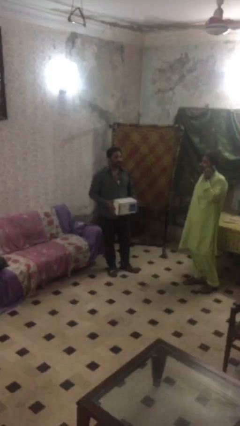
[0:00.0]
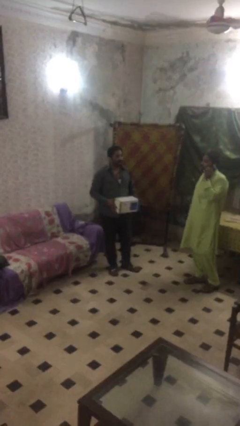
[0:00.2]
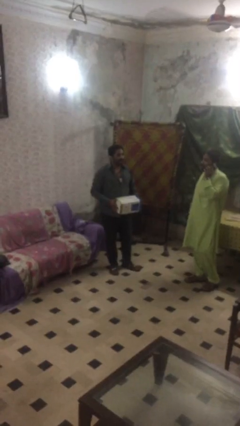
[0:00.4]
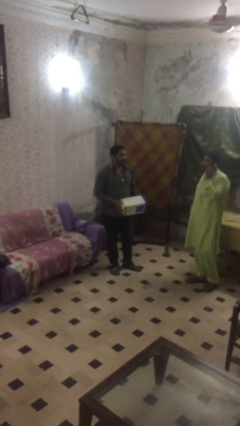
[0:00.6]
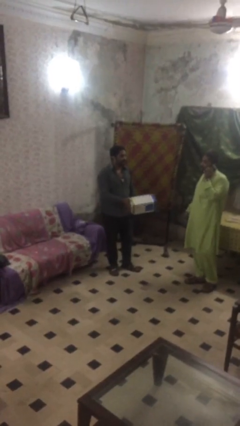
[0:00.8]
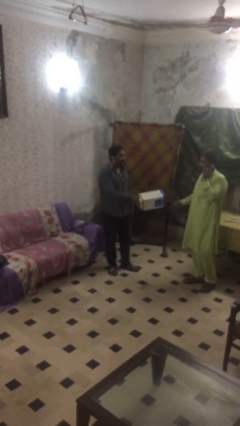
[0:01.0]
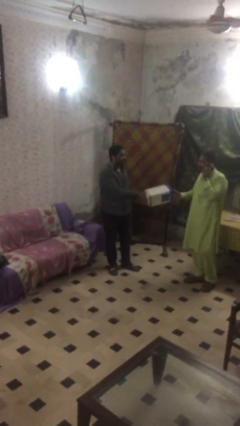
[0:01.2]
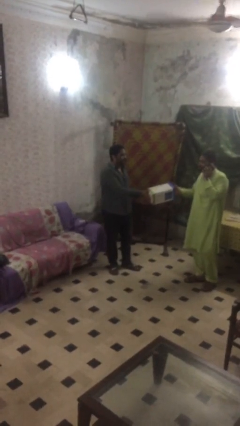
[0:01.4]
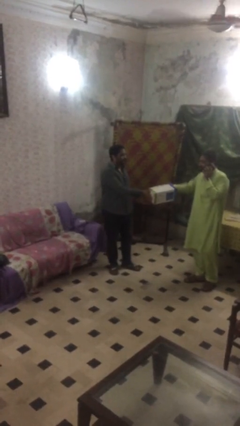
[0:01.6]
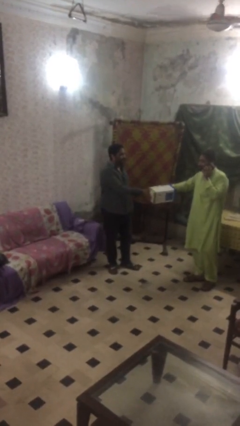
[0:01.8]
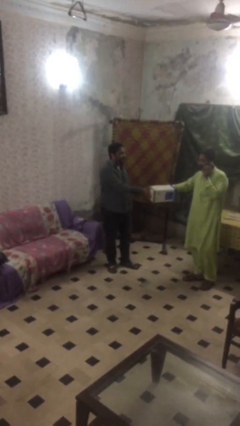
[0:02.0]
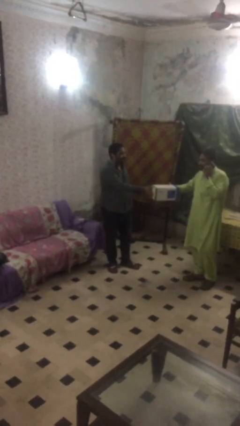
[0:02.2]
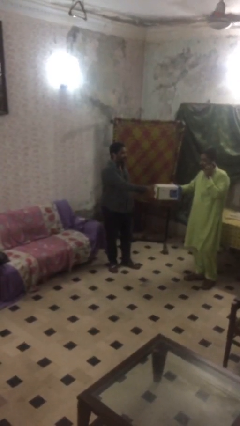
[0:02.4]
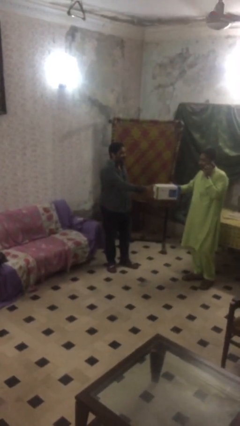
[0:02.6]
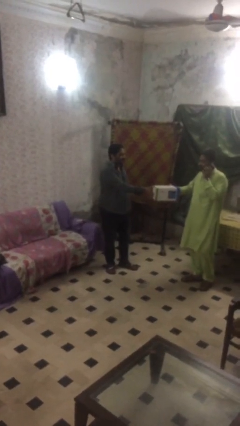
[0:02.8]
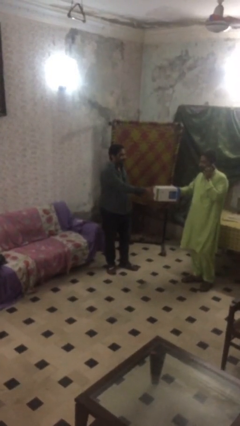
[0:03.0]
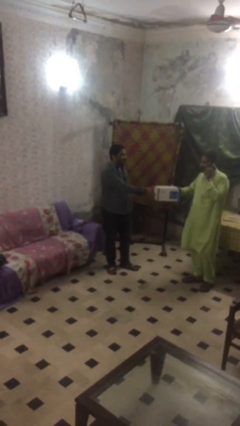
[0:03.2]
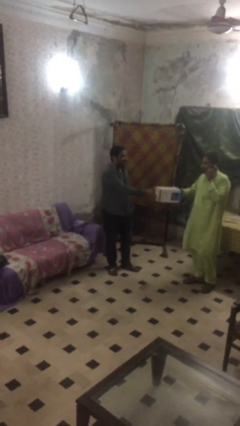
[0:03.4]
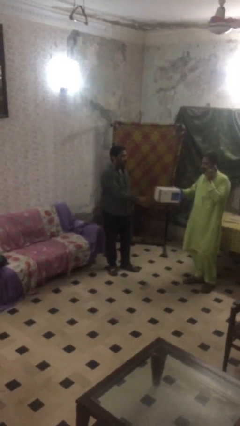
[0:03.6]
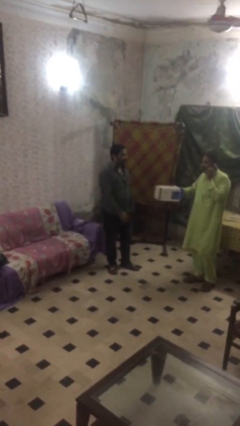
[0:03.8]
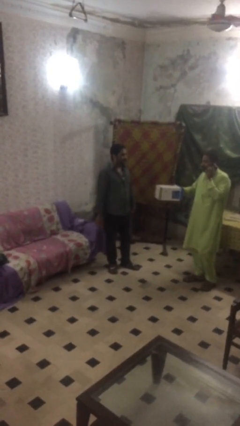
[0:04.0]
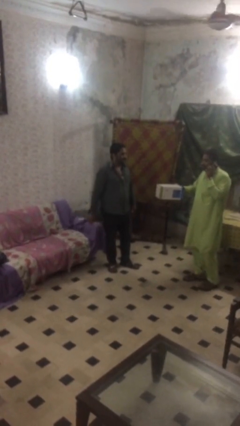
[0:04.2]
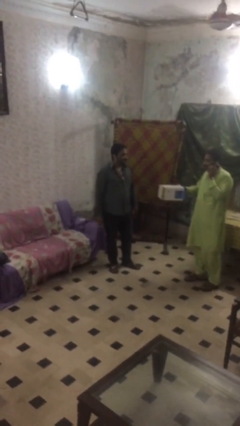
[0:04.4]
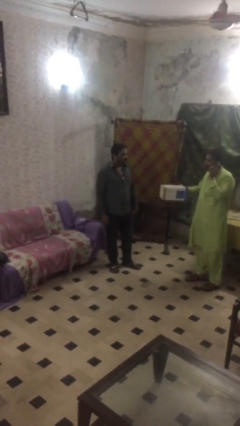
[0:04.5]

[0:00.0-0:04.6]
person transfers object to person

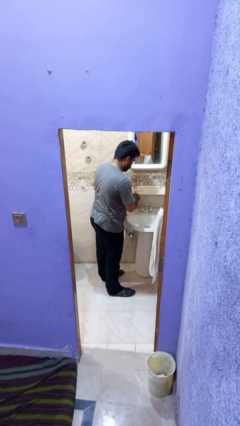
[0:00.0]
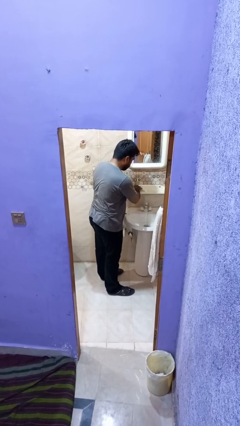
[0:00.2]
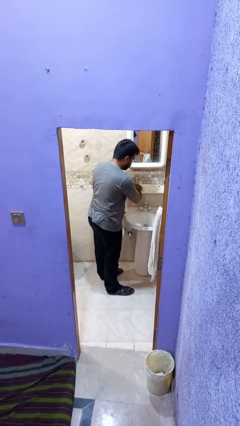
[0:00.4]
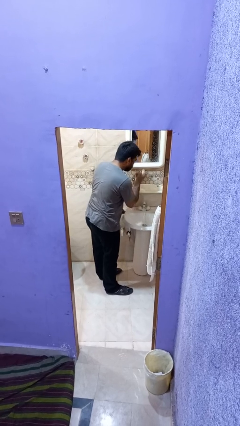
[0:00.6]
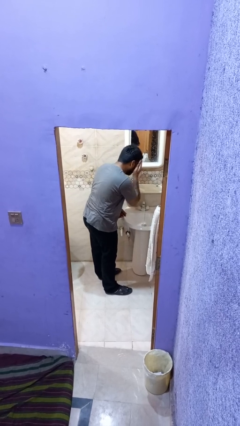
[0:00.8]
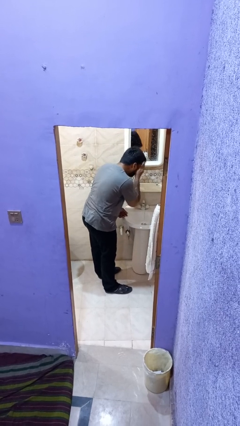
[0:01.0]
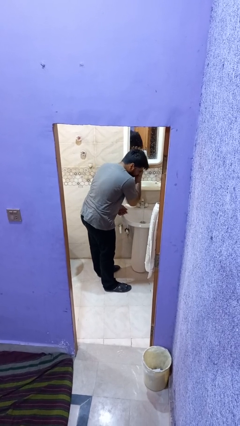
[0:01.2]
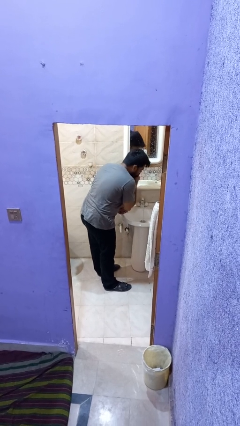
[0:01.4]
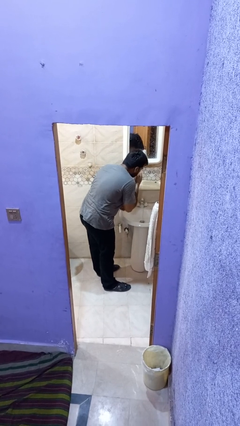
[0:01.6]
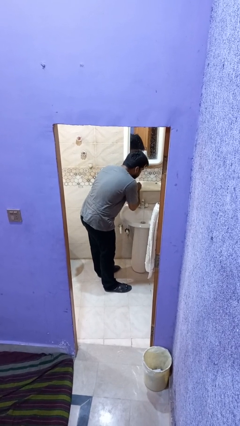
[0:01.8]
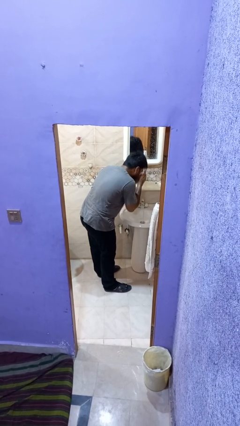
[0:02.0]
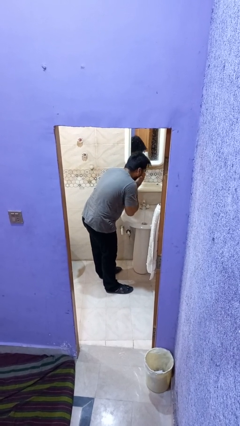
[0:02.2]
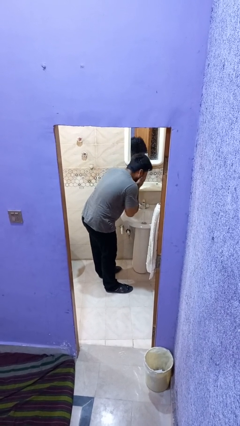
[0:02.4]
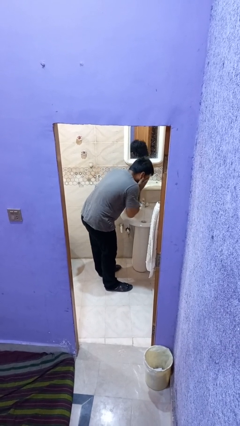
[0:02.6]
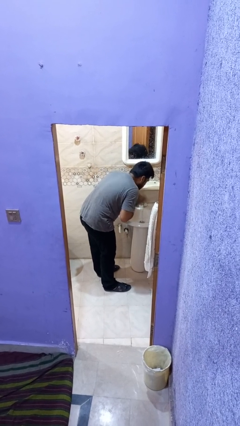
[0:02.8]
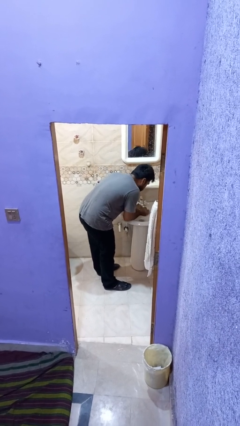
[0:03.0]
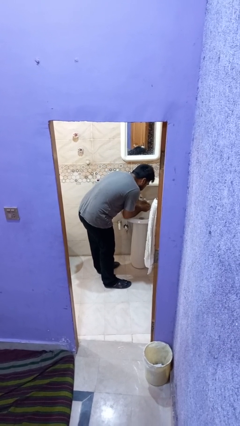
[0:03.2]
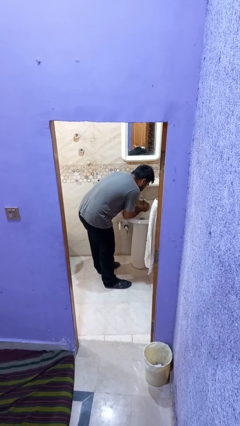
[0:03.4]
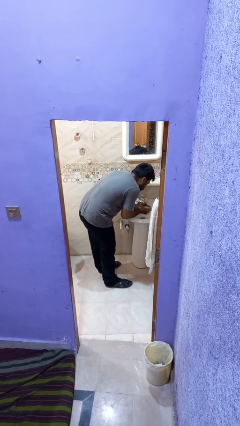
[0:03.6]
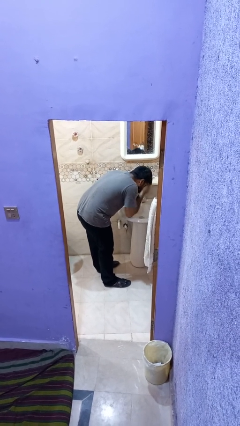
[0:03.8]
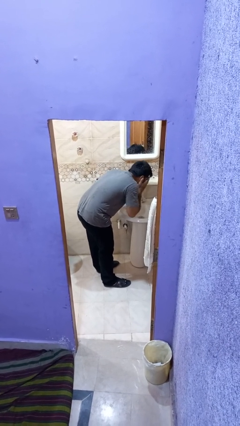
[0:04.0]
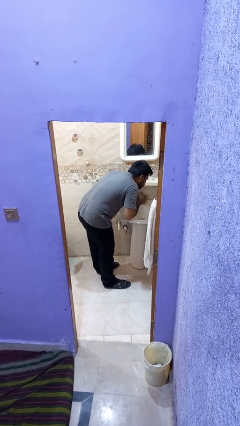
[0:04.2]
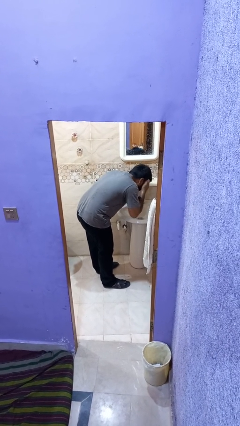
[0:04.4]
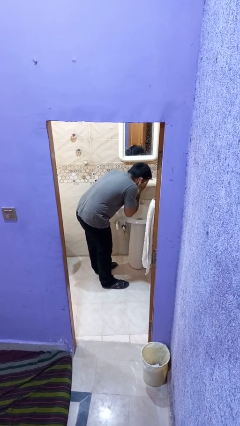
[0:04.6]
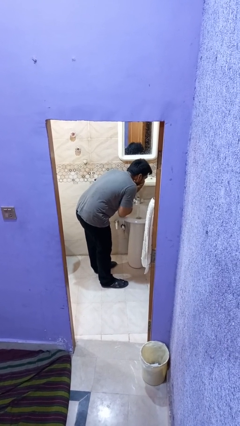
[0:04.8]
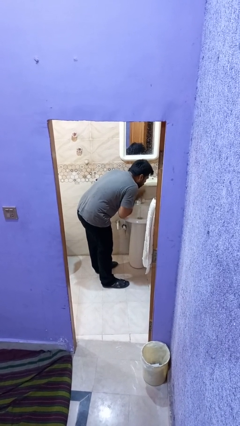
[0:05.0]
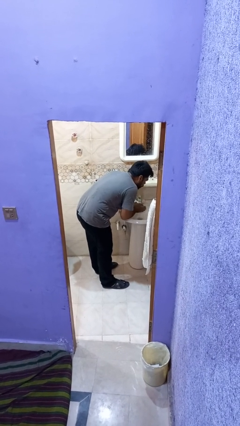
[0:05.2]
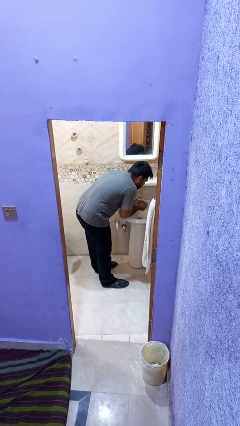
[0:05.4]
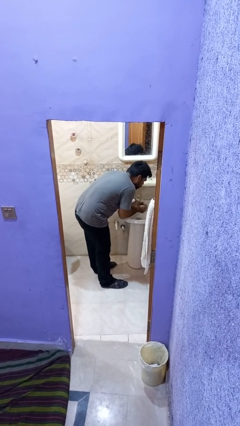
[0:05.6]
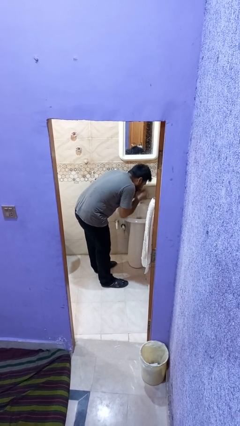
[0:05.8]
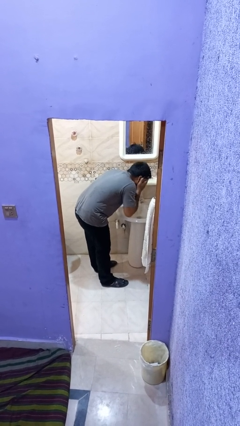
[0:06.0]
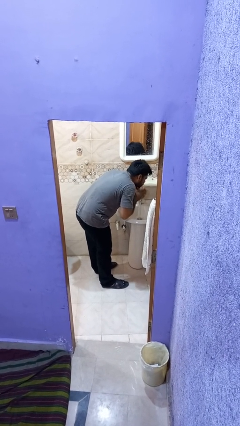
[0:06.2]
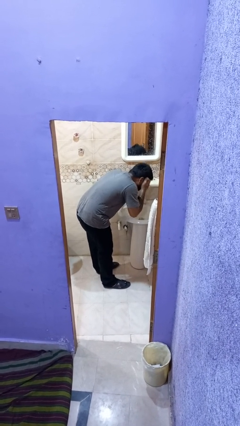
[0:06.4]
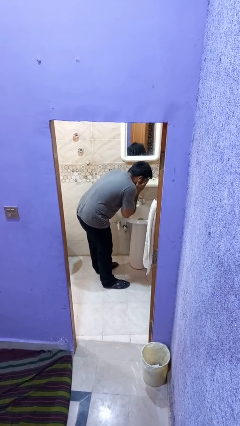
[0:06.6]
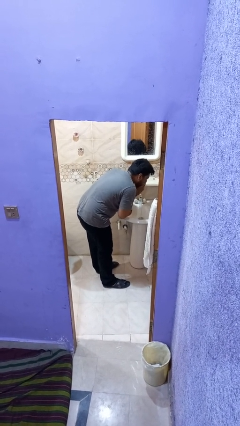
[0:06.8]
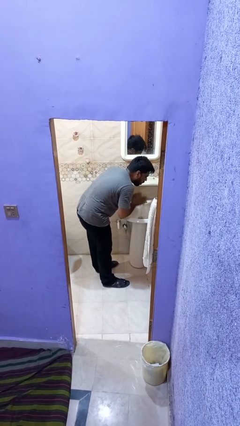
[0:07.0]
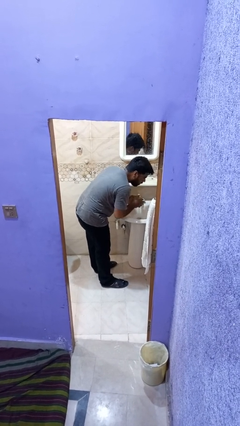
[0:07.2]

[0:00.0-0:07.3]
person washes face

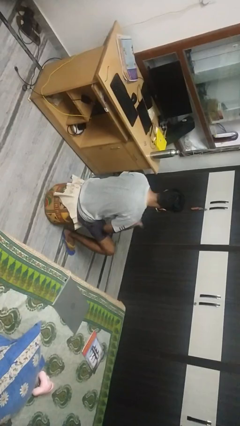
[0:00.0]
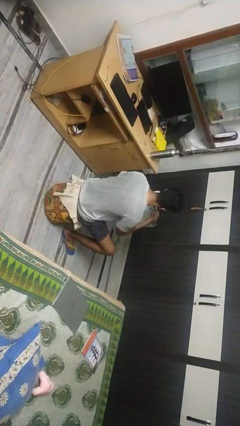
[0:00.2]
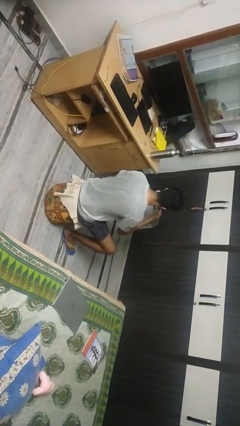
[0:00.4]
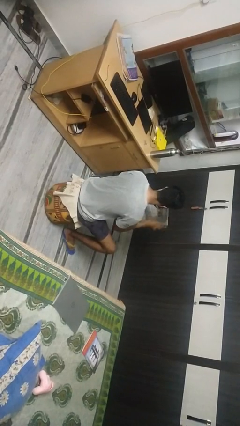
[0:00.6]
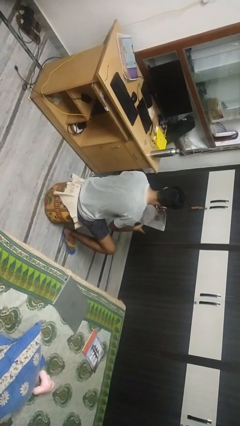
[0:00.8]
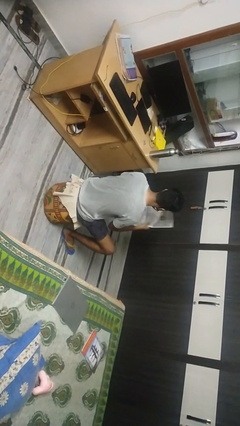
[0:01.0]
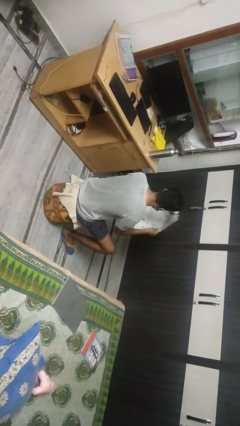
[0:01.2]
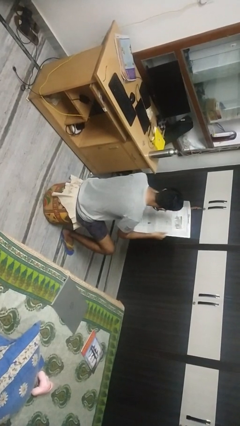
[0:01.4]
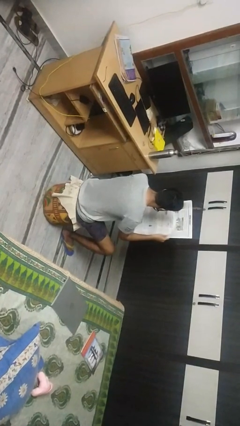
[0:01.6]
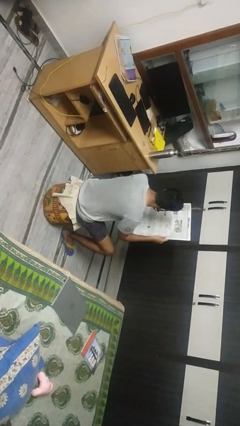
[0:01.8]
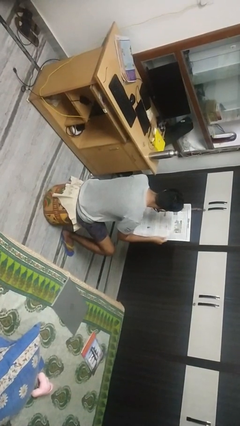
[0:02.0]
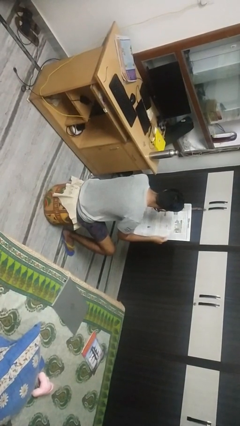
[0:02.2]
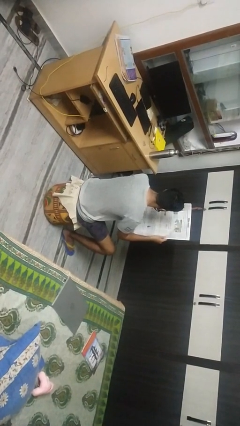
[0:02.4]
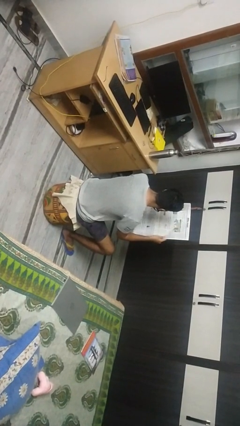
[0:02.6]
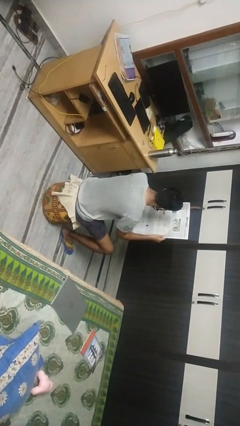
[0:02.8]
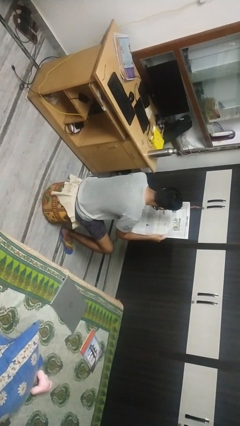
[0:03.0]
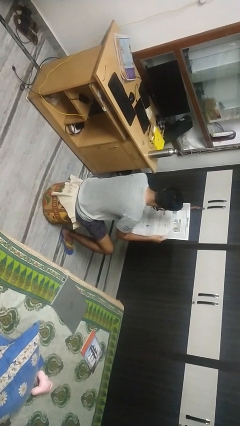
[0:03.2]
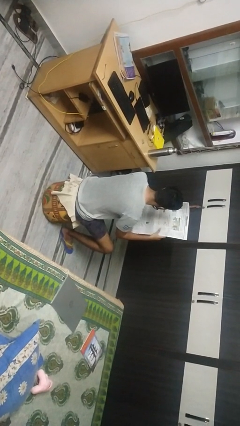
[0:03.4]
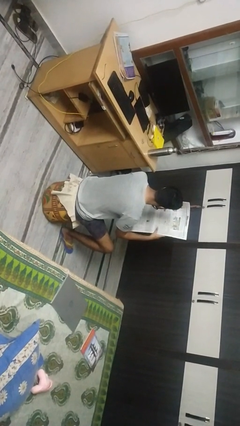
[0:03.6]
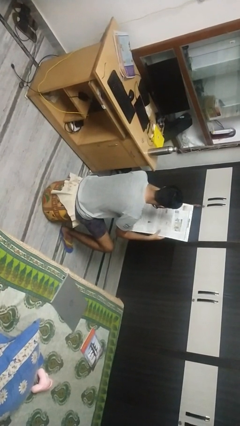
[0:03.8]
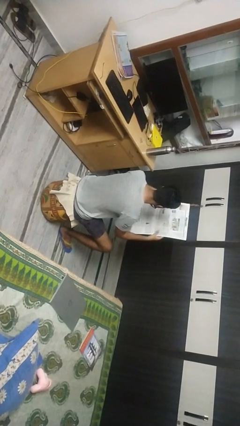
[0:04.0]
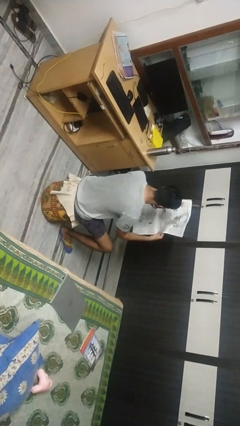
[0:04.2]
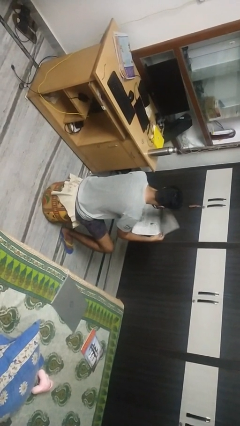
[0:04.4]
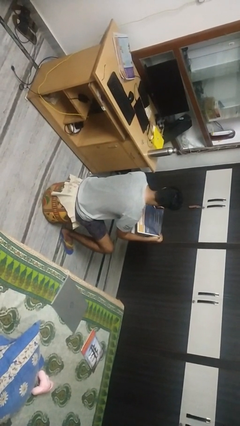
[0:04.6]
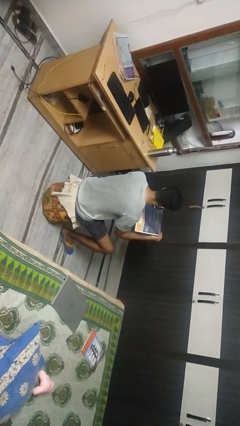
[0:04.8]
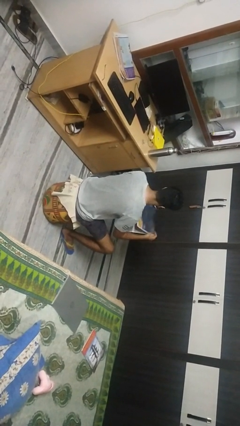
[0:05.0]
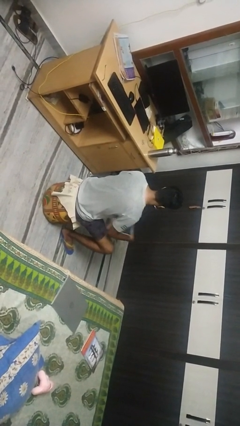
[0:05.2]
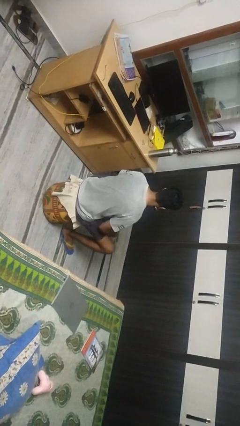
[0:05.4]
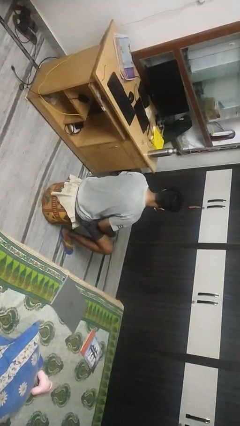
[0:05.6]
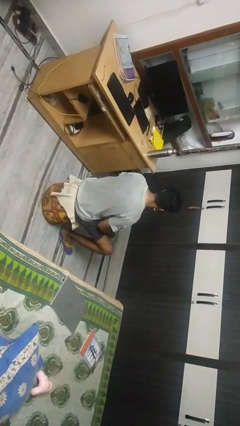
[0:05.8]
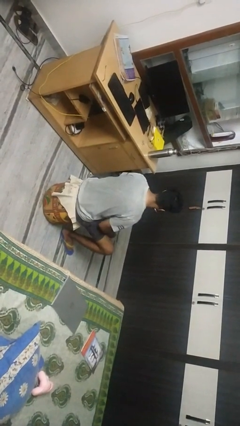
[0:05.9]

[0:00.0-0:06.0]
person reads newspaper

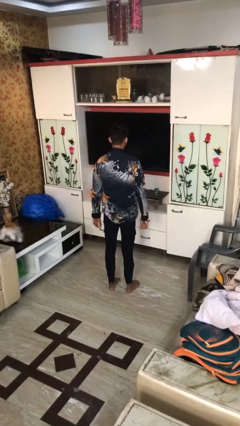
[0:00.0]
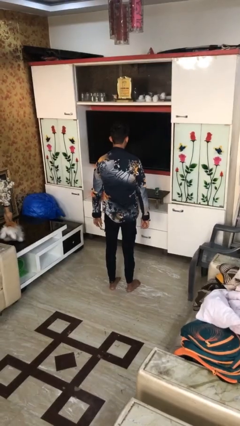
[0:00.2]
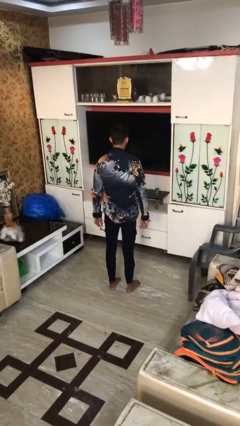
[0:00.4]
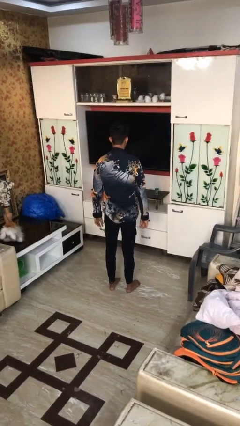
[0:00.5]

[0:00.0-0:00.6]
person puts on shirt
